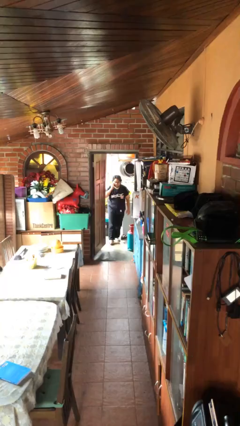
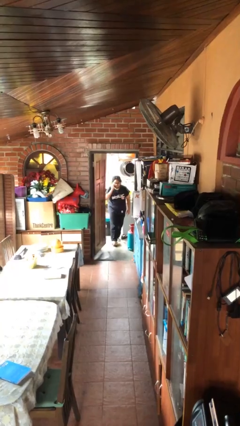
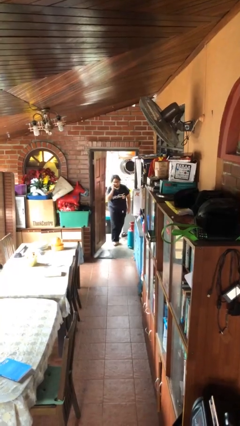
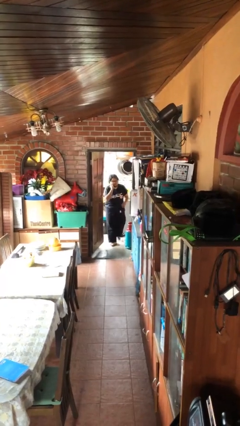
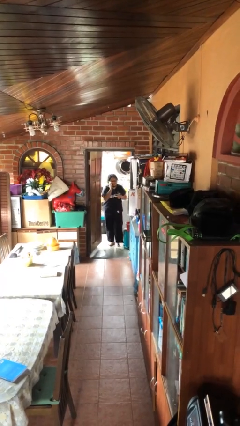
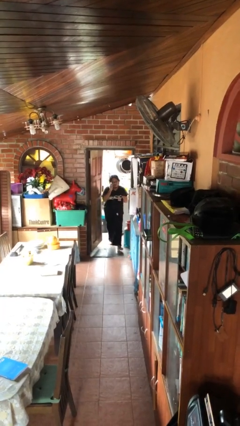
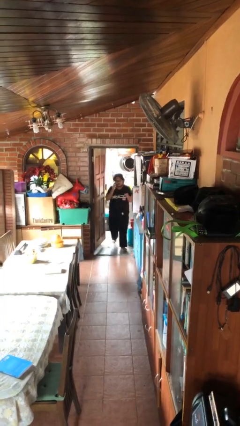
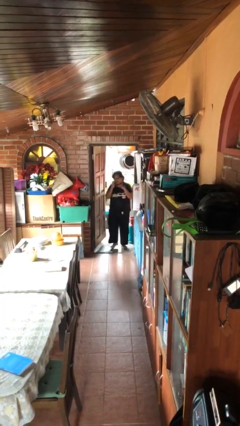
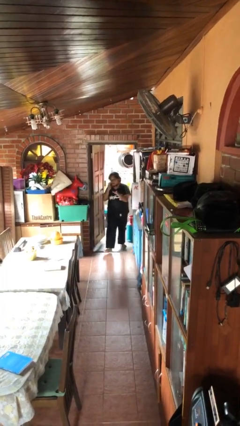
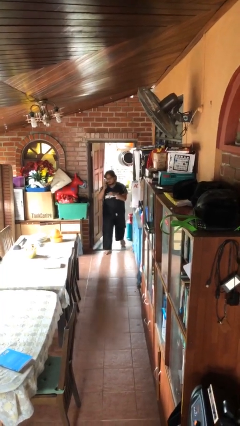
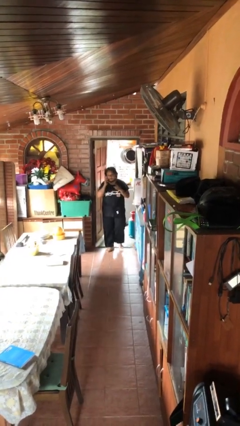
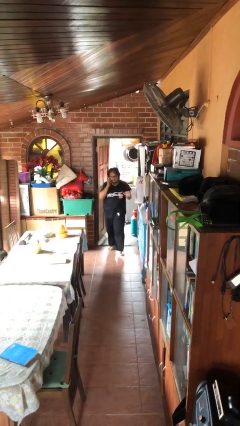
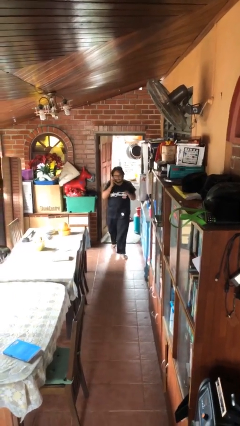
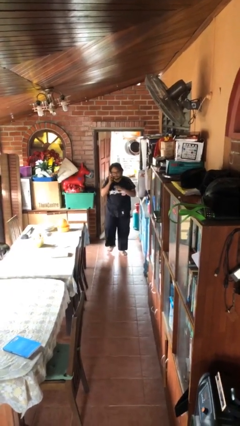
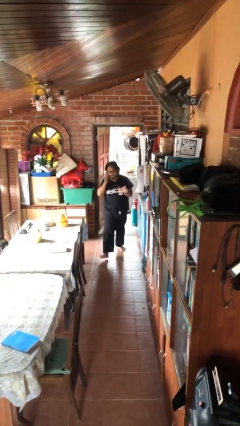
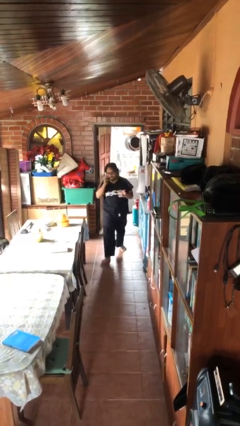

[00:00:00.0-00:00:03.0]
person enters scene through structure

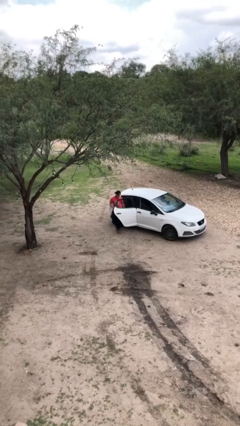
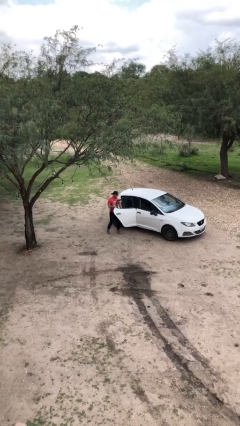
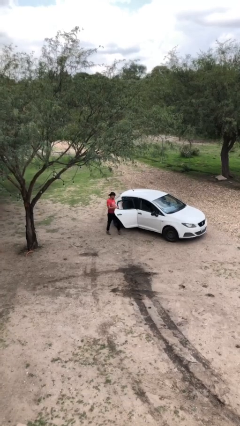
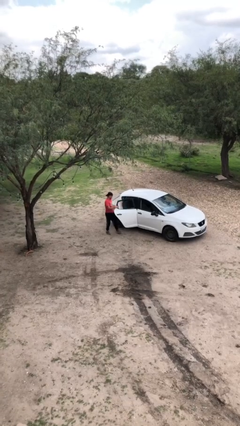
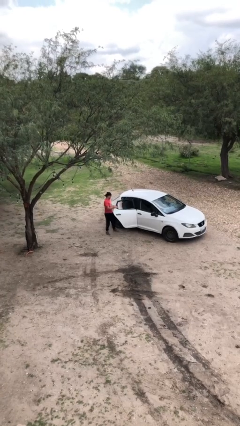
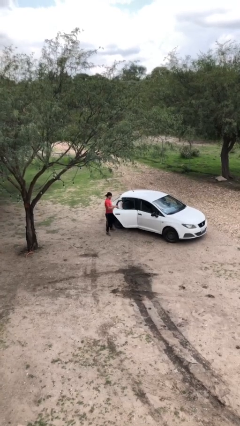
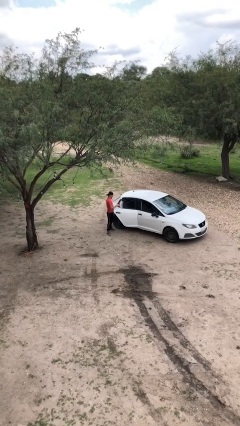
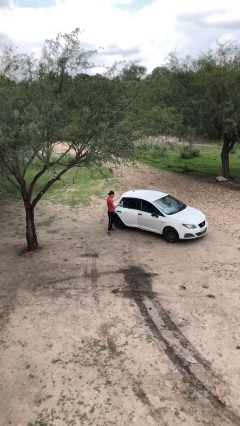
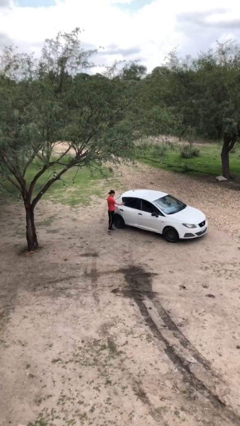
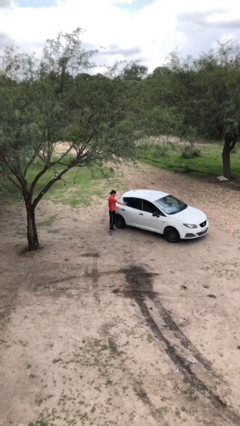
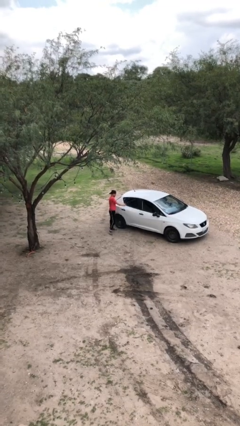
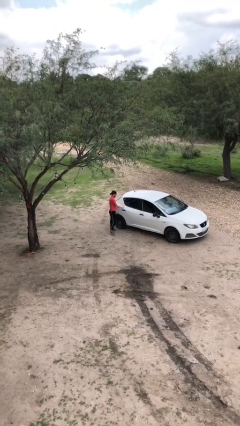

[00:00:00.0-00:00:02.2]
person closes car door

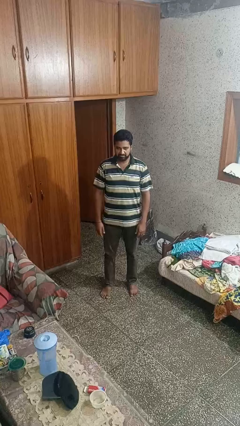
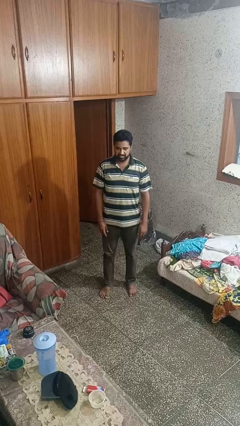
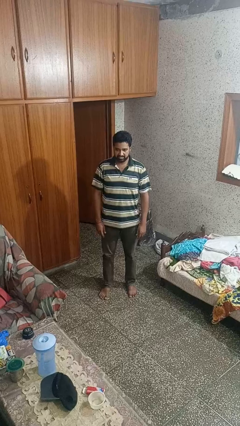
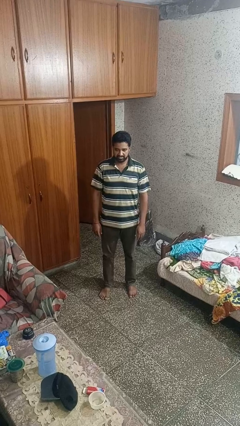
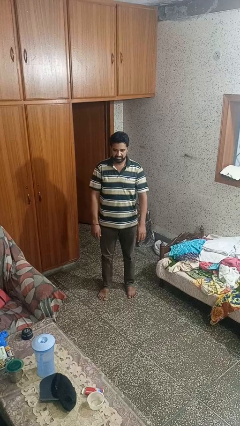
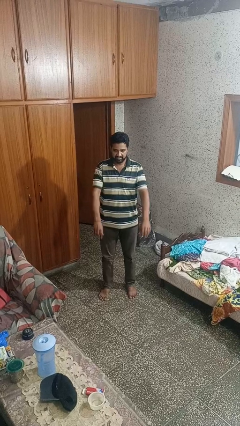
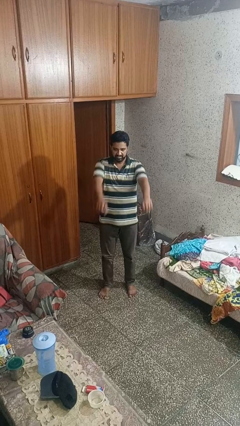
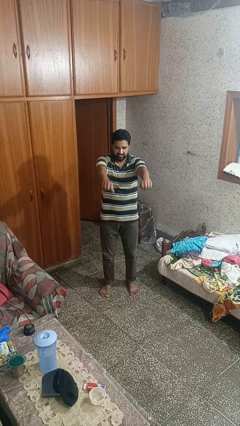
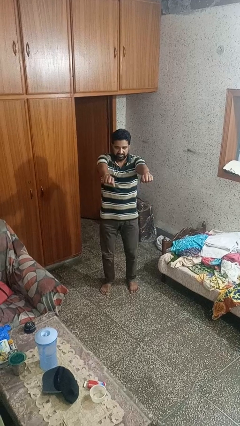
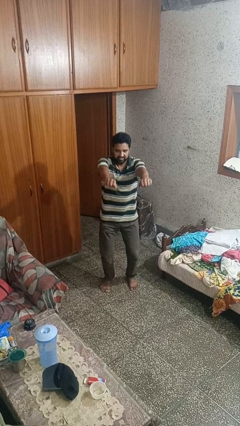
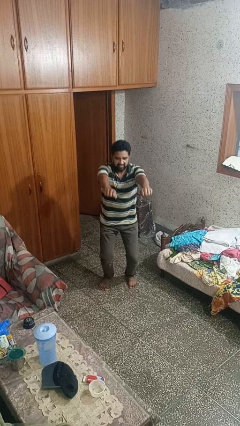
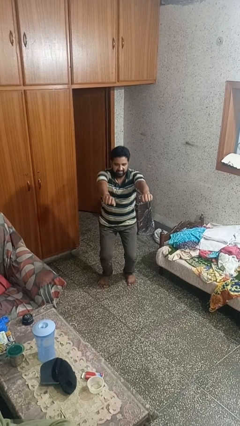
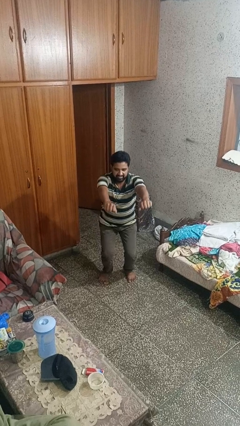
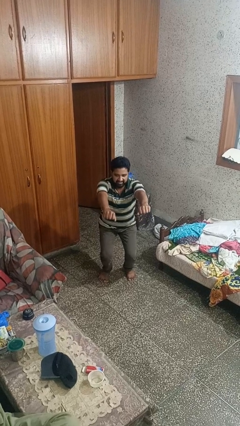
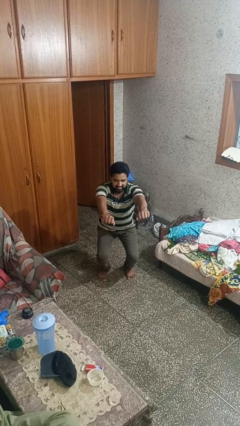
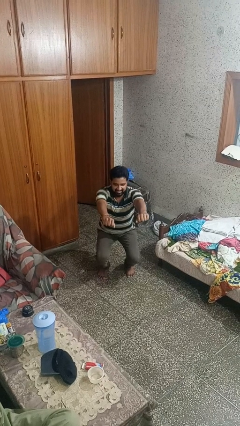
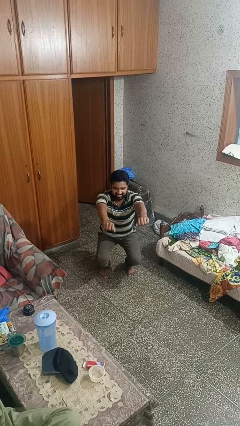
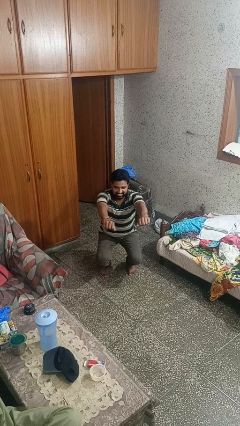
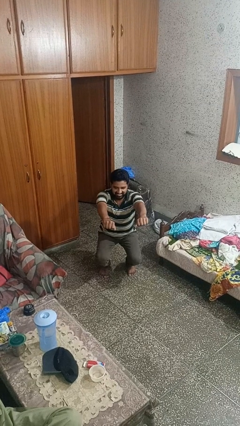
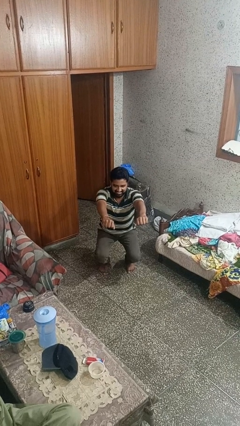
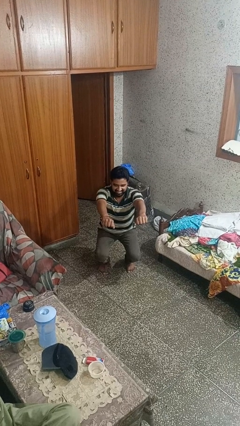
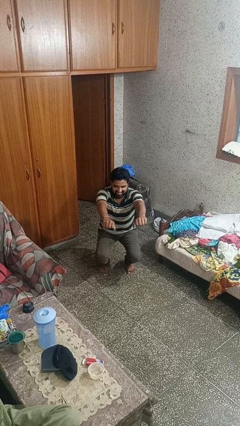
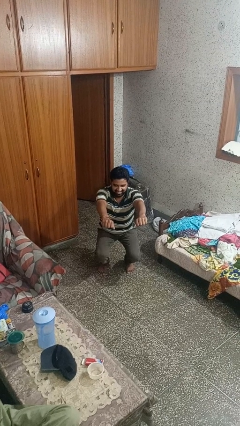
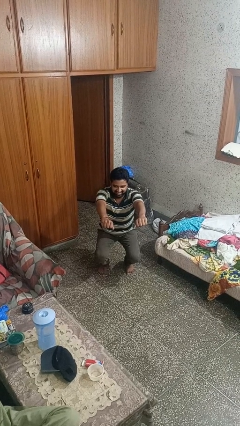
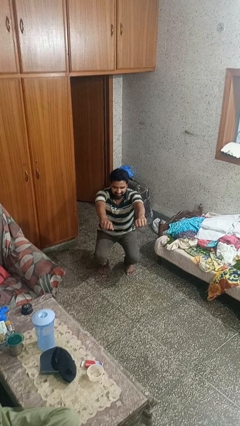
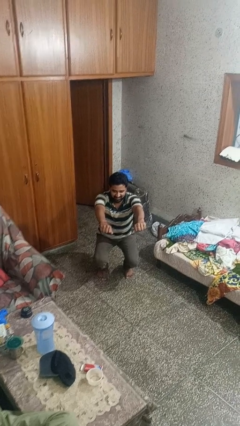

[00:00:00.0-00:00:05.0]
person squats

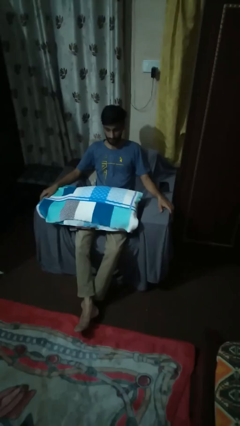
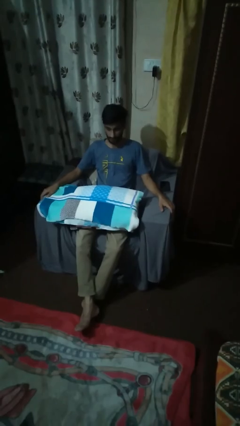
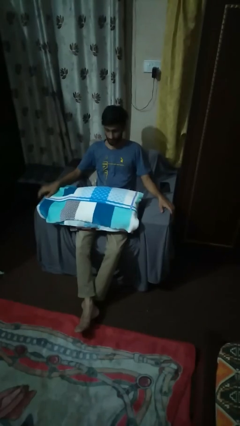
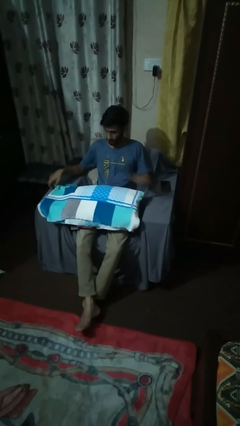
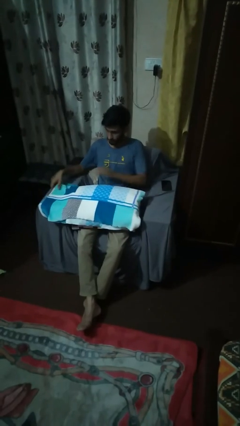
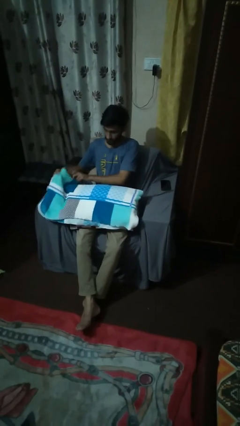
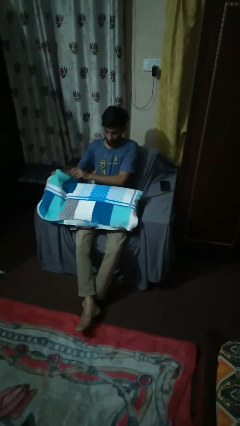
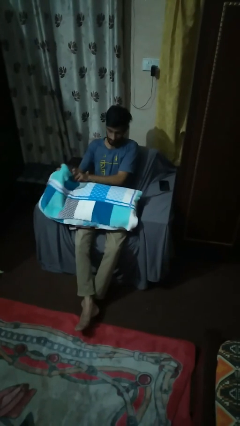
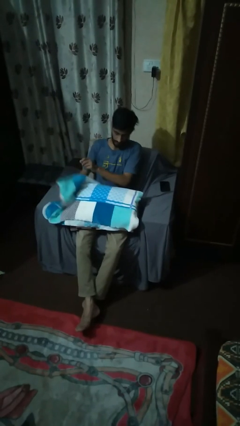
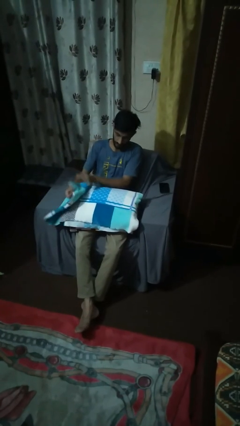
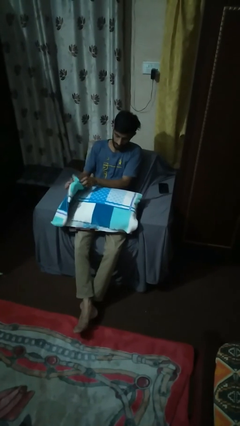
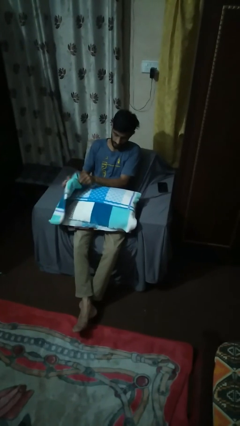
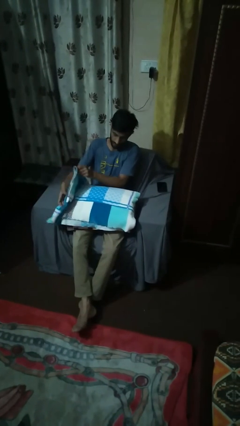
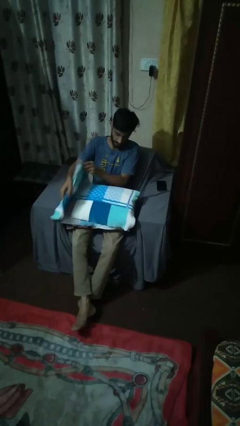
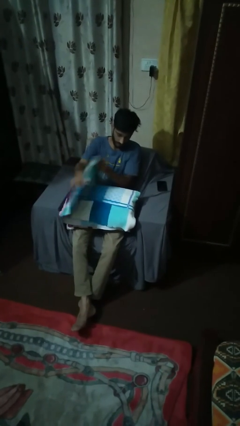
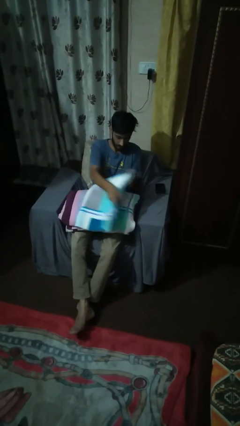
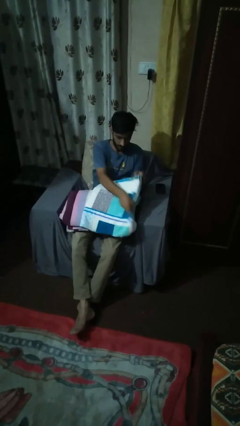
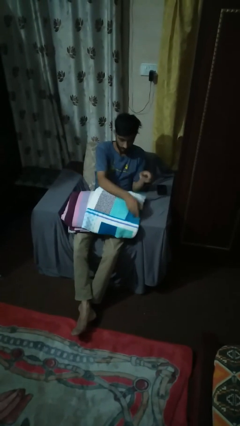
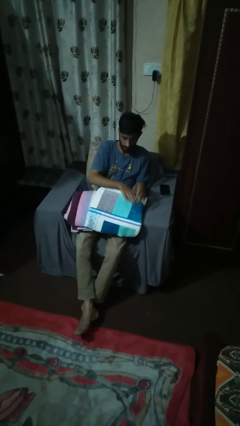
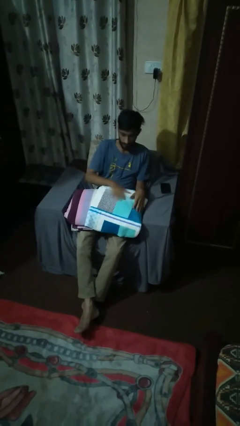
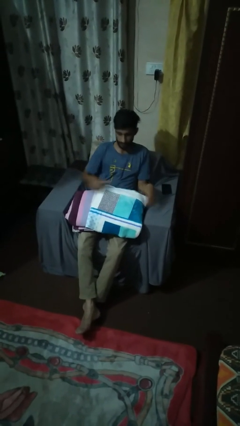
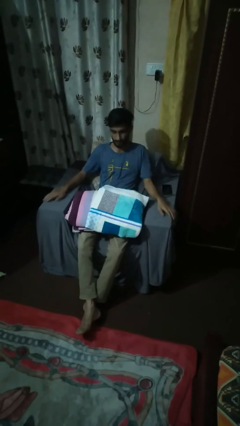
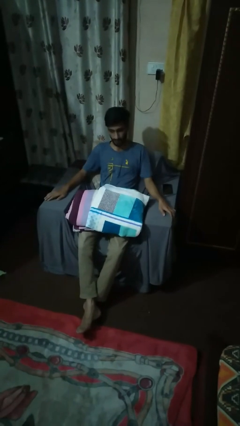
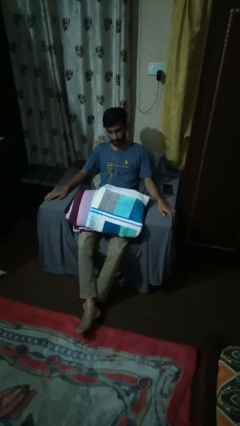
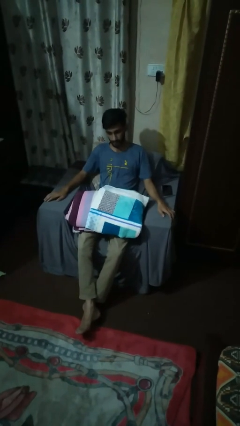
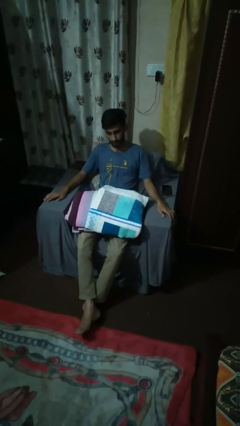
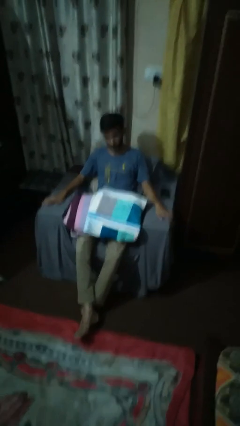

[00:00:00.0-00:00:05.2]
person folds blanket

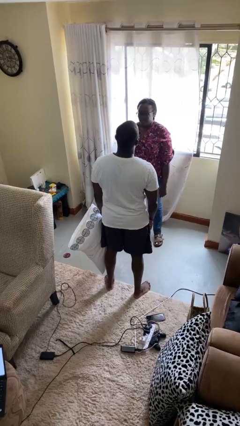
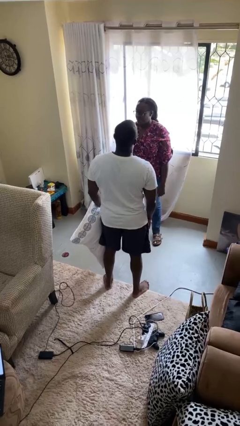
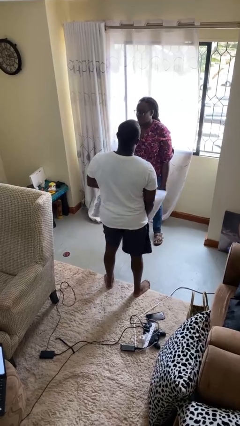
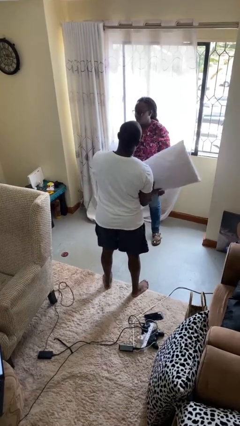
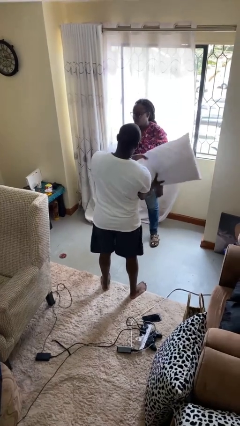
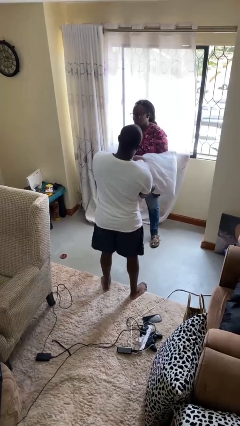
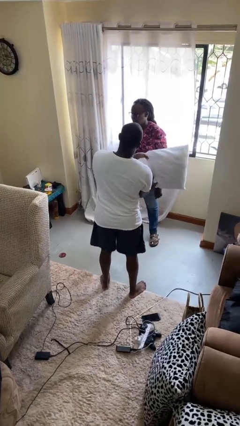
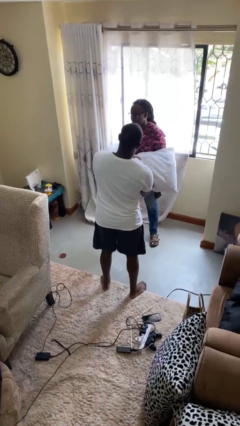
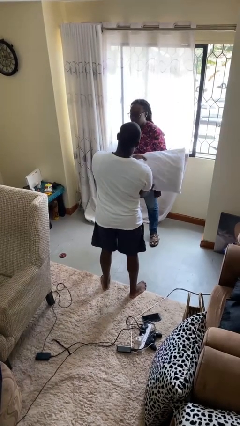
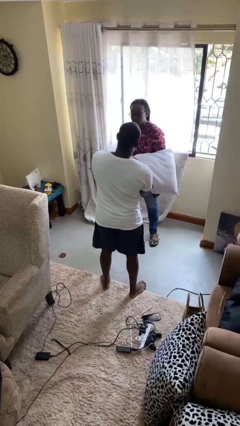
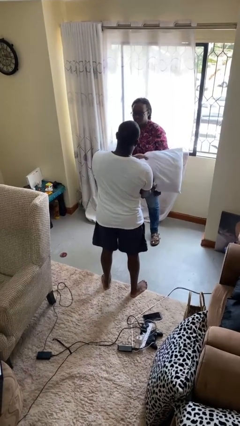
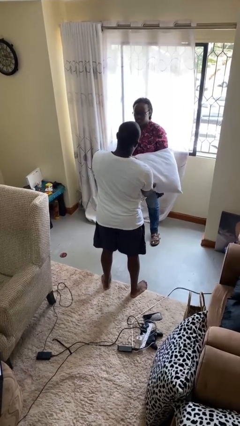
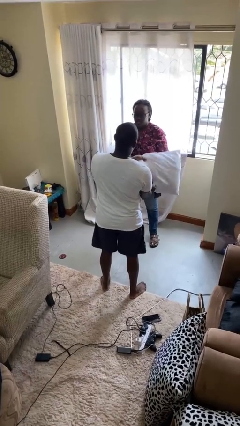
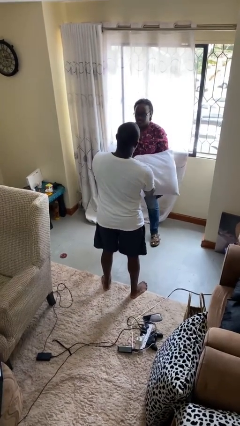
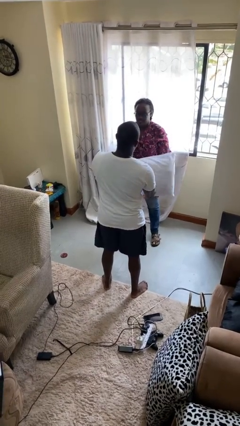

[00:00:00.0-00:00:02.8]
person hits person with pillow
